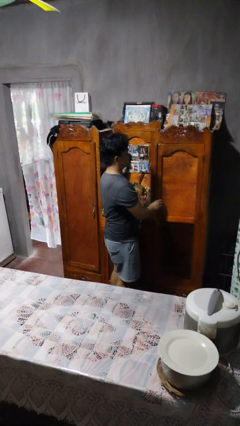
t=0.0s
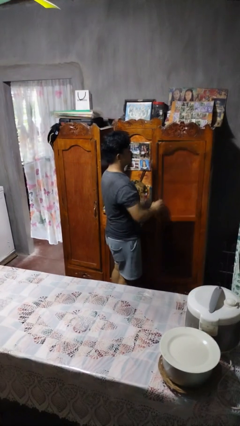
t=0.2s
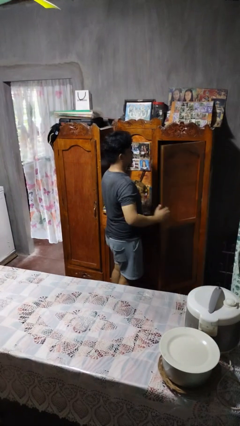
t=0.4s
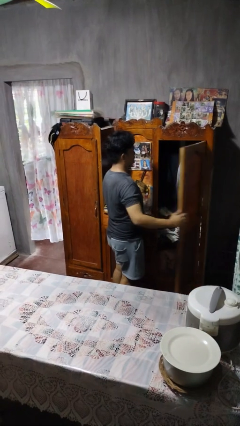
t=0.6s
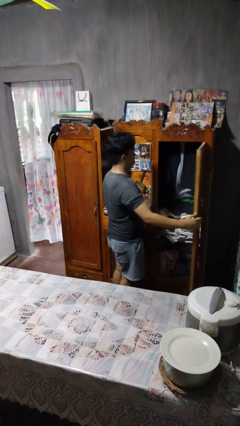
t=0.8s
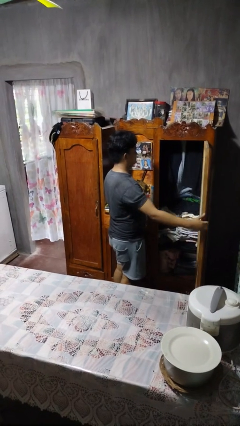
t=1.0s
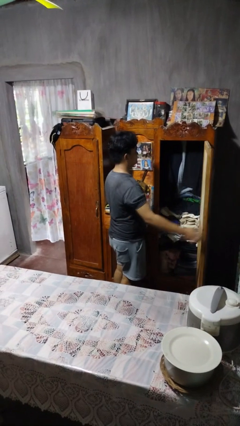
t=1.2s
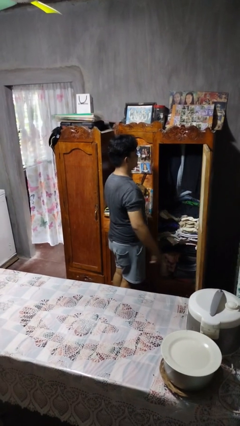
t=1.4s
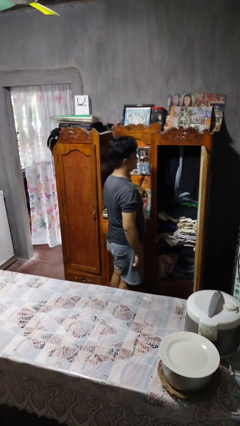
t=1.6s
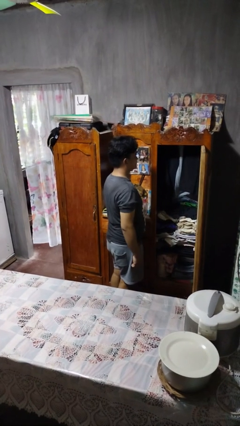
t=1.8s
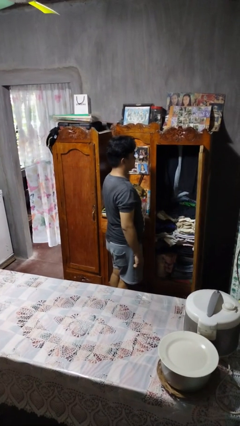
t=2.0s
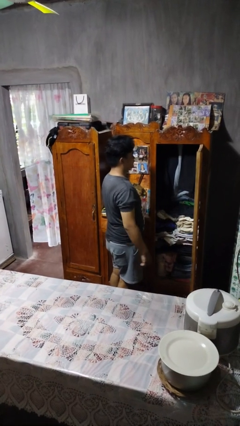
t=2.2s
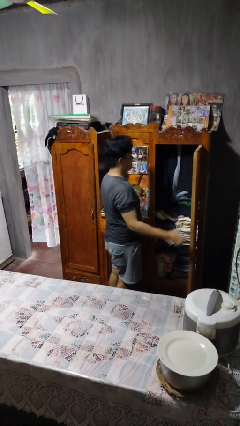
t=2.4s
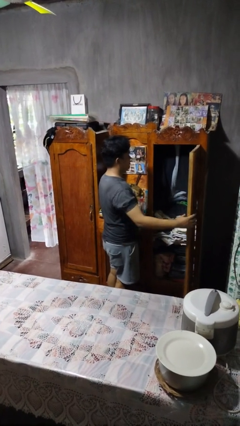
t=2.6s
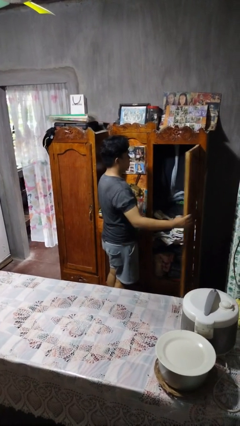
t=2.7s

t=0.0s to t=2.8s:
person opens closet door

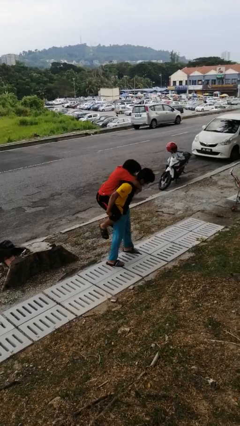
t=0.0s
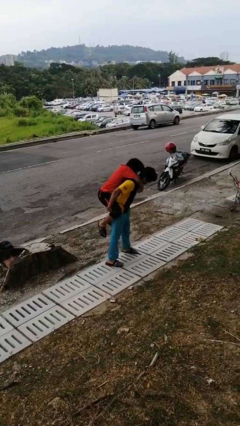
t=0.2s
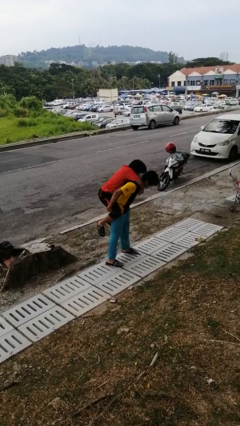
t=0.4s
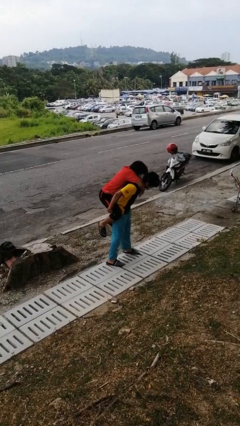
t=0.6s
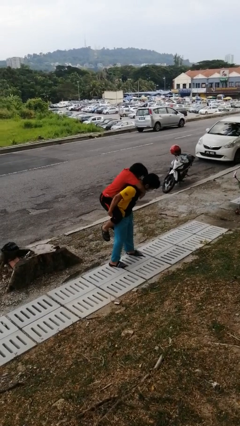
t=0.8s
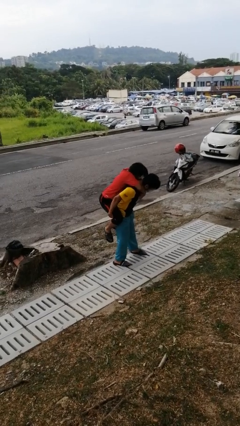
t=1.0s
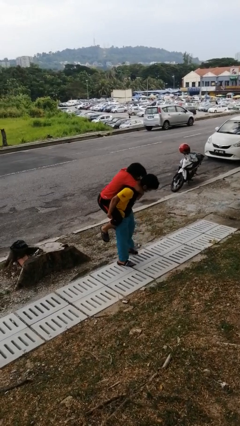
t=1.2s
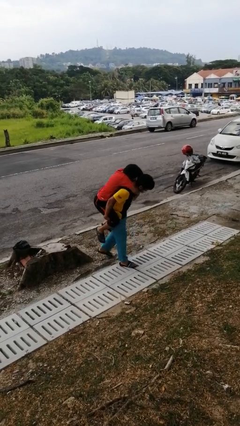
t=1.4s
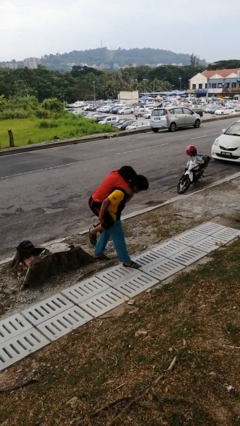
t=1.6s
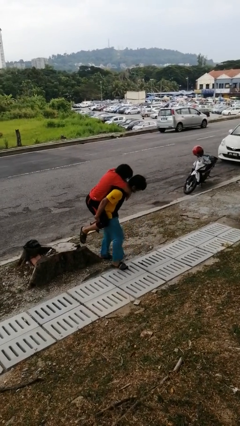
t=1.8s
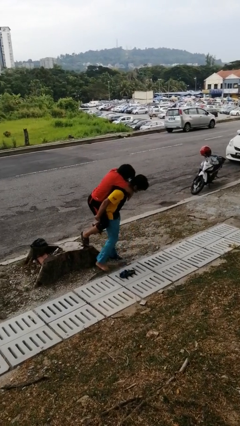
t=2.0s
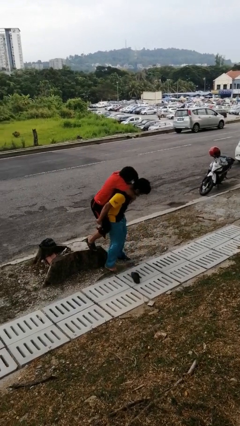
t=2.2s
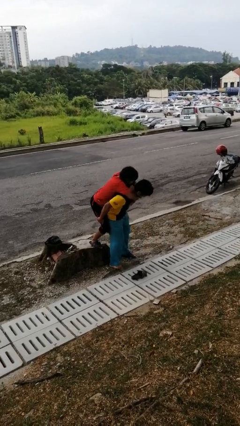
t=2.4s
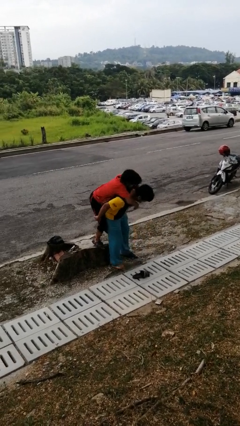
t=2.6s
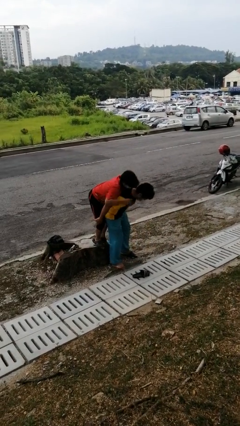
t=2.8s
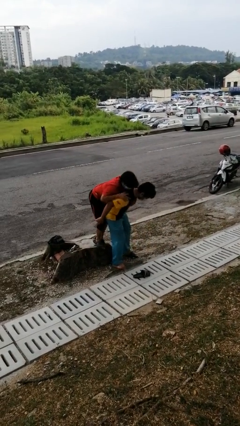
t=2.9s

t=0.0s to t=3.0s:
person puts down person

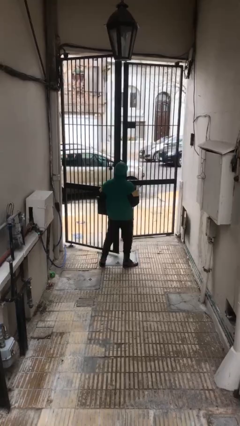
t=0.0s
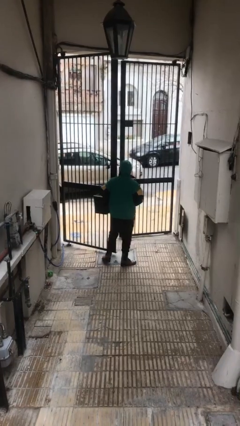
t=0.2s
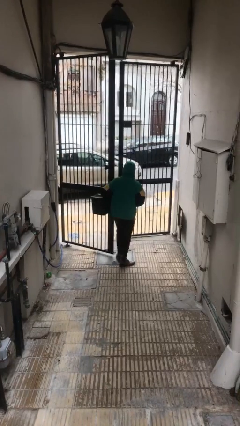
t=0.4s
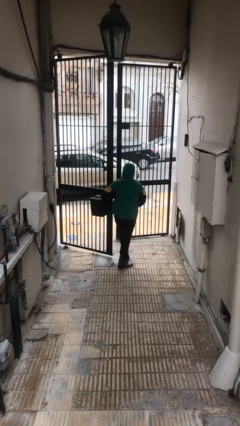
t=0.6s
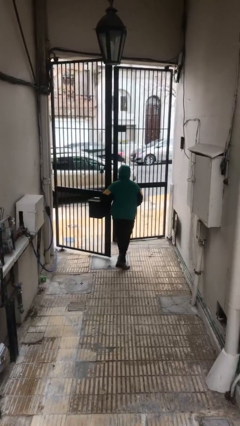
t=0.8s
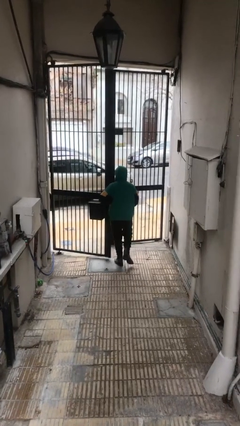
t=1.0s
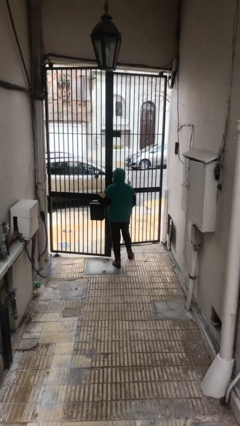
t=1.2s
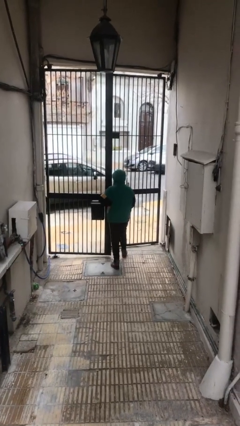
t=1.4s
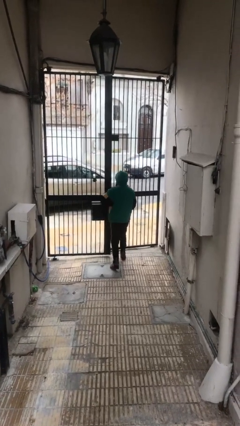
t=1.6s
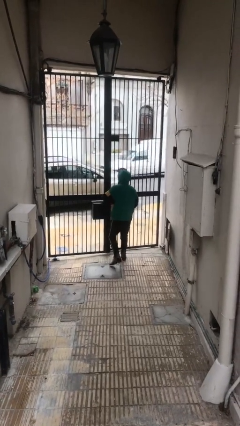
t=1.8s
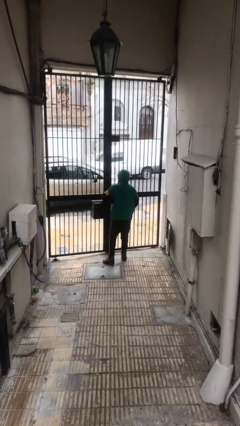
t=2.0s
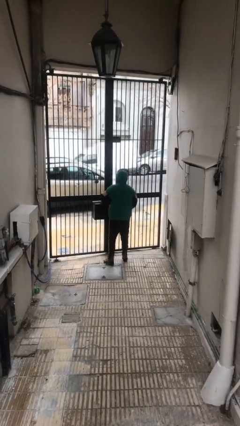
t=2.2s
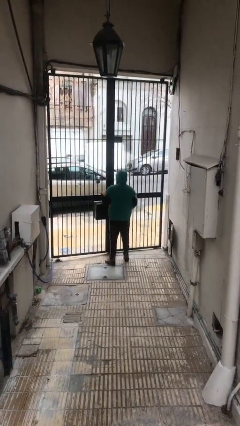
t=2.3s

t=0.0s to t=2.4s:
person closes gate

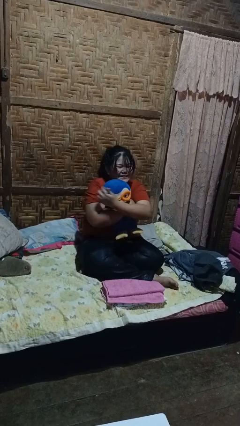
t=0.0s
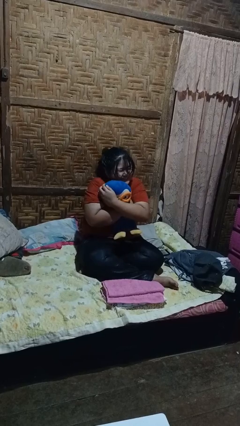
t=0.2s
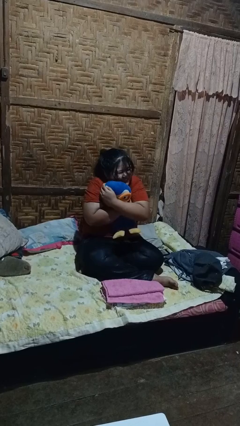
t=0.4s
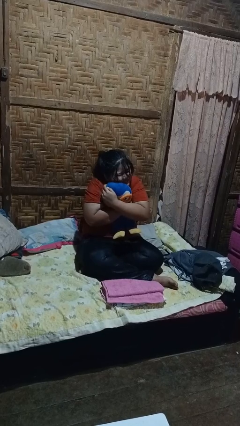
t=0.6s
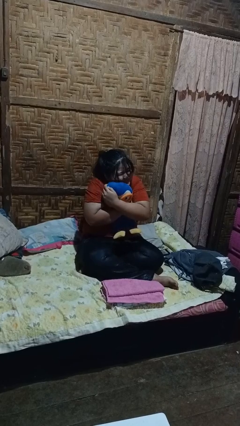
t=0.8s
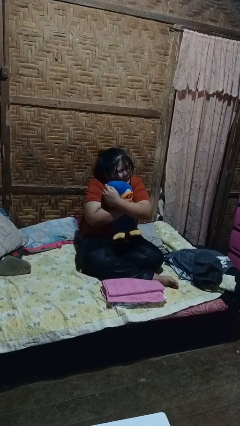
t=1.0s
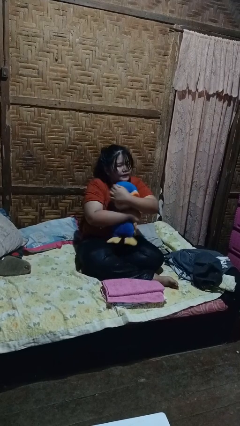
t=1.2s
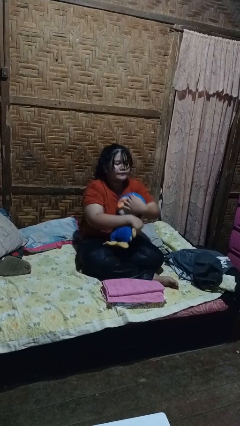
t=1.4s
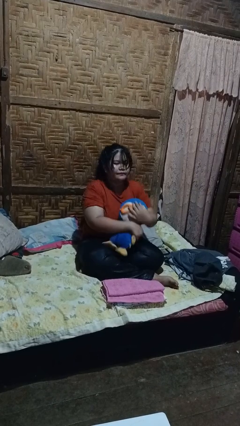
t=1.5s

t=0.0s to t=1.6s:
person hugs stuffed animal

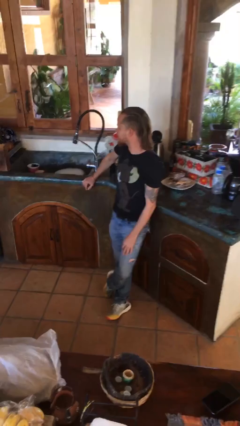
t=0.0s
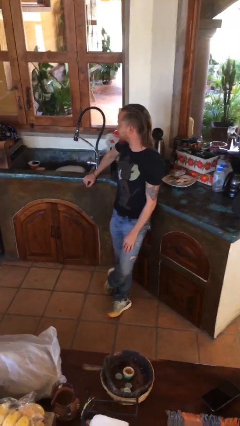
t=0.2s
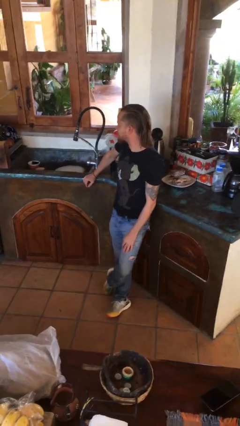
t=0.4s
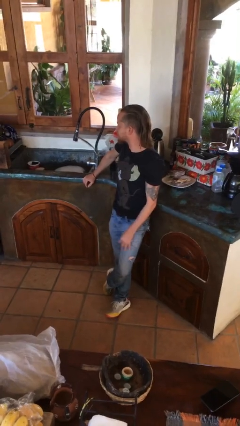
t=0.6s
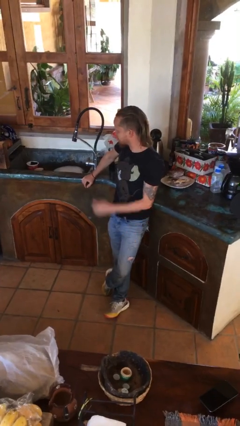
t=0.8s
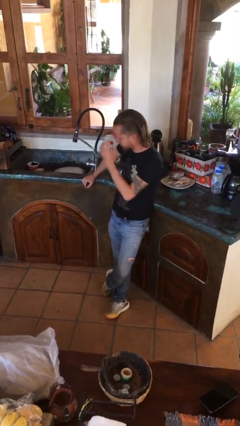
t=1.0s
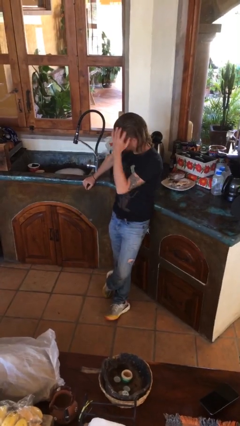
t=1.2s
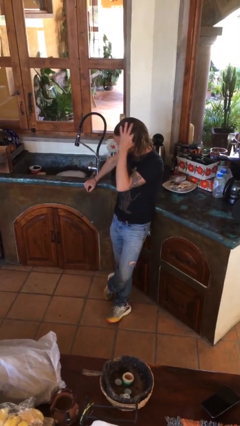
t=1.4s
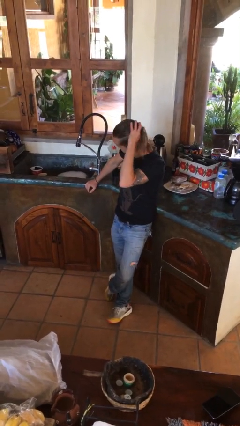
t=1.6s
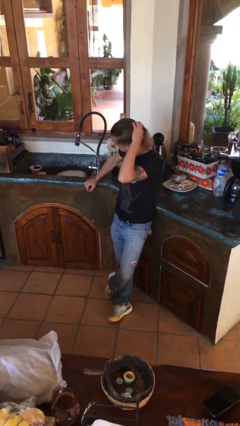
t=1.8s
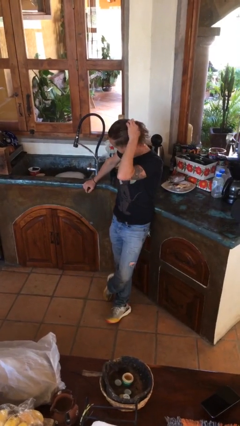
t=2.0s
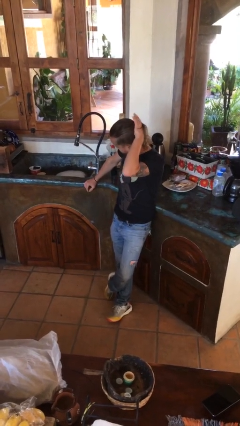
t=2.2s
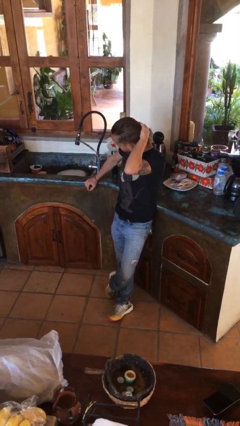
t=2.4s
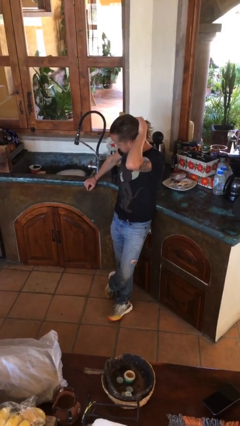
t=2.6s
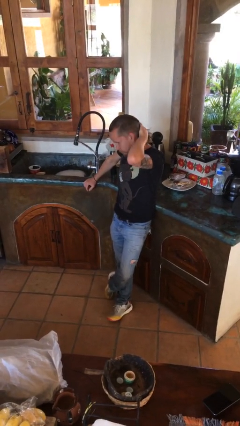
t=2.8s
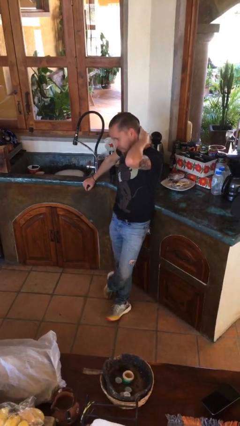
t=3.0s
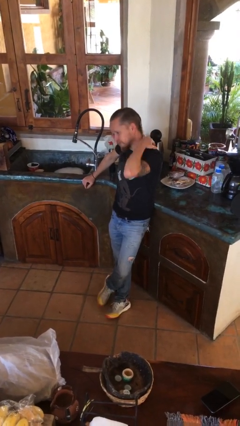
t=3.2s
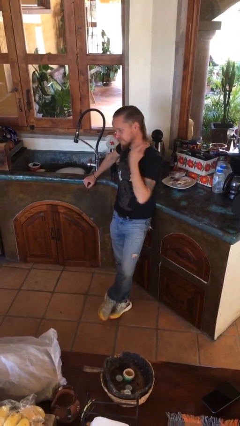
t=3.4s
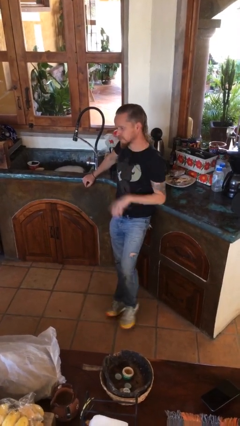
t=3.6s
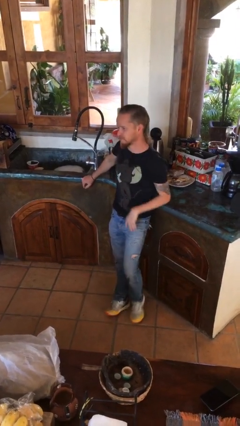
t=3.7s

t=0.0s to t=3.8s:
person strokes hair

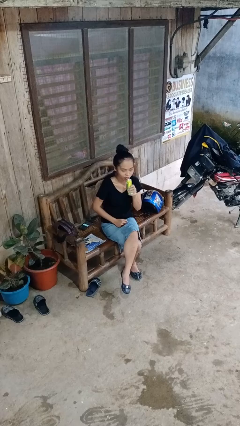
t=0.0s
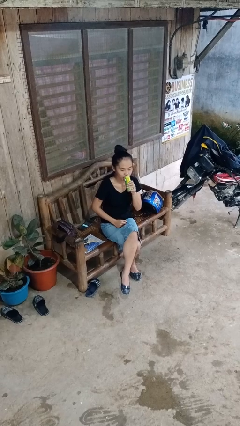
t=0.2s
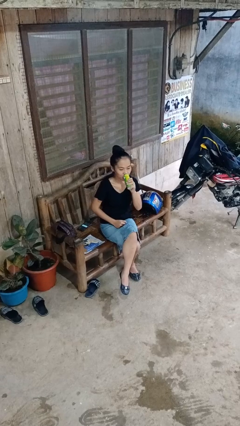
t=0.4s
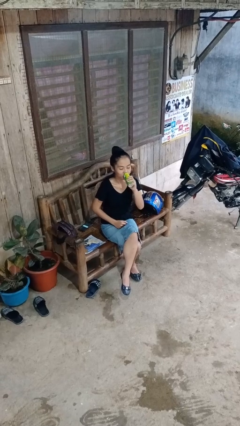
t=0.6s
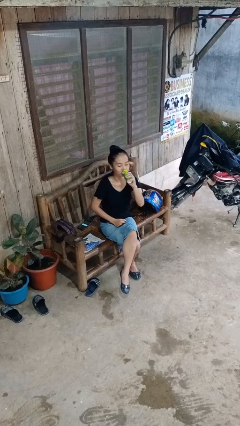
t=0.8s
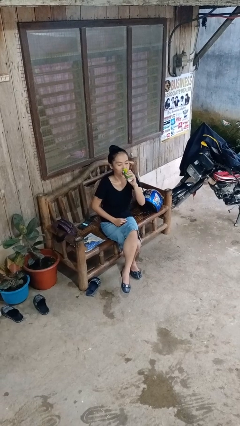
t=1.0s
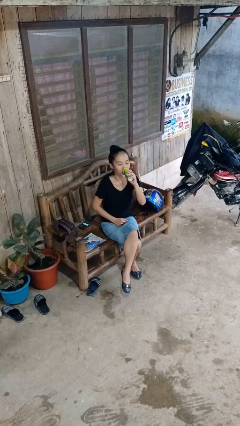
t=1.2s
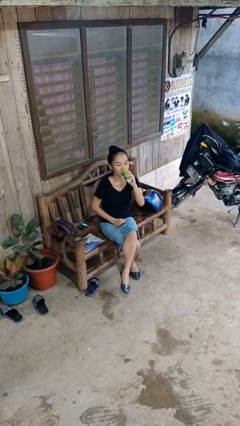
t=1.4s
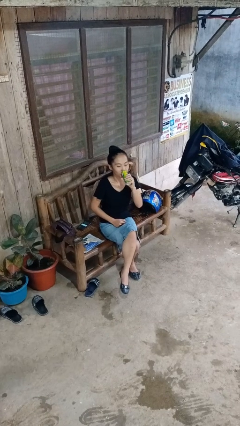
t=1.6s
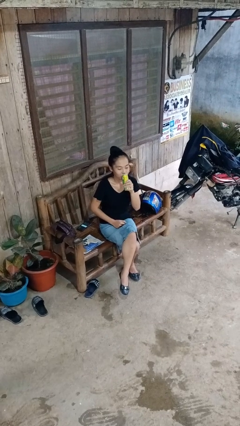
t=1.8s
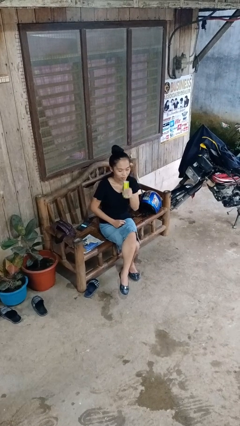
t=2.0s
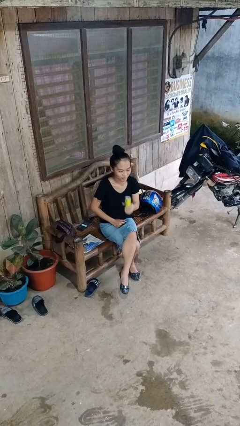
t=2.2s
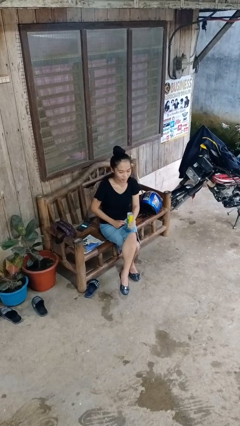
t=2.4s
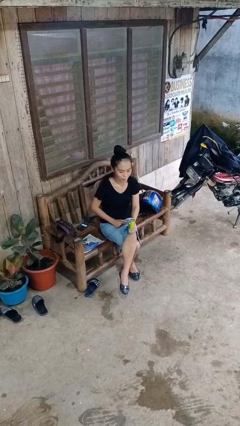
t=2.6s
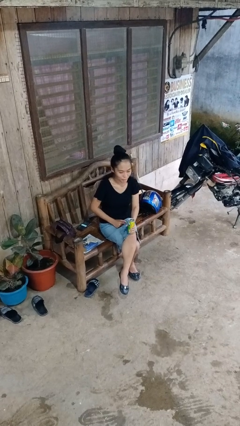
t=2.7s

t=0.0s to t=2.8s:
person drinks from beverage can

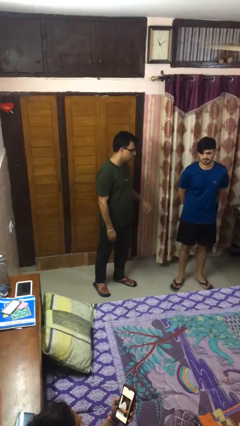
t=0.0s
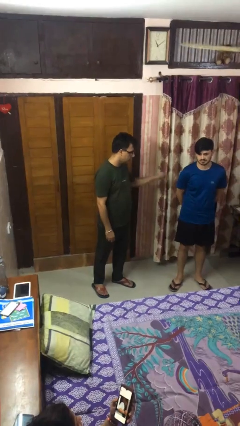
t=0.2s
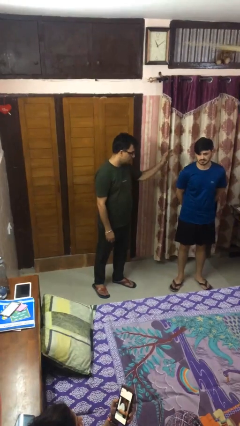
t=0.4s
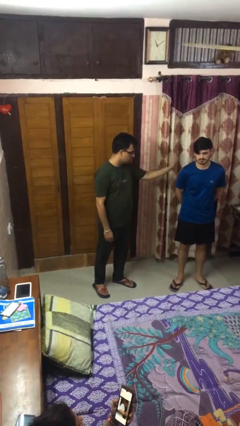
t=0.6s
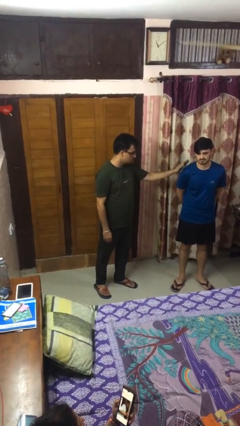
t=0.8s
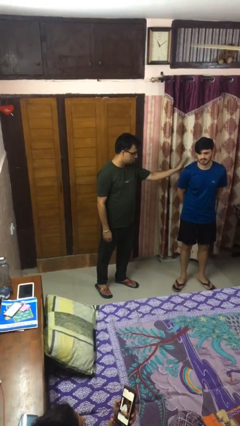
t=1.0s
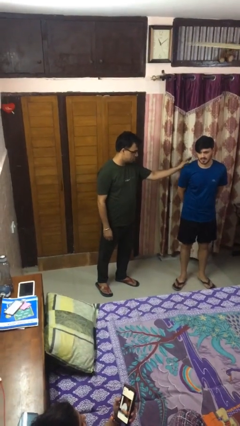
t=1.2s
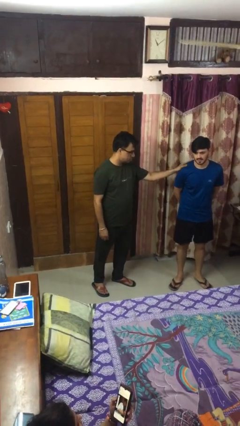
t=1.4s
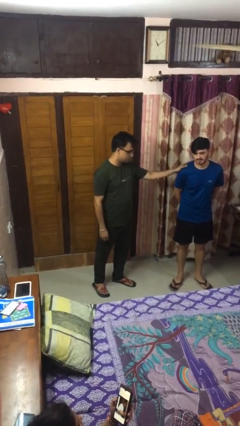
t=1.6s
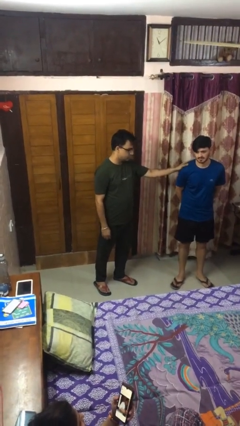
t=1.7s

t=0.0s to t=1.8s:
person pounds shoulders of person
